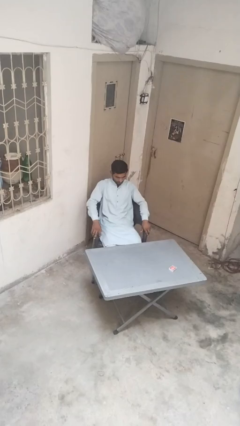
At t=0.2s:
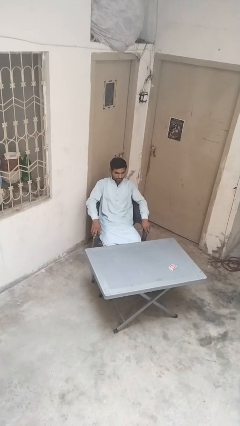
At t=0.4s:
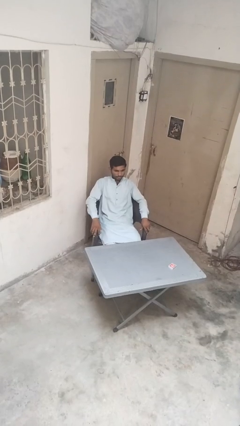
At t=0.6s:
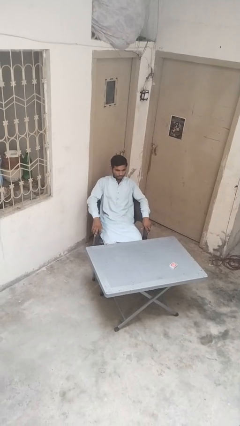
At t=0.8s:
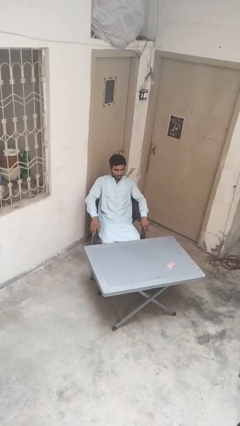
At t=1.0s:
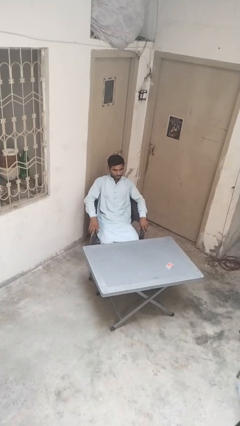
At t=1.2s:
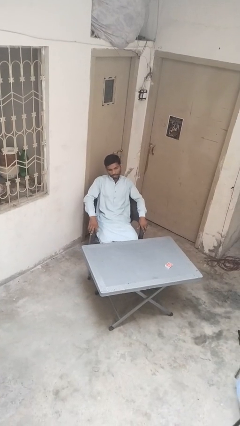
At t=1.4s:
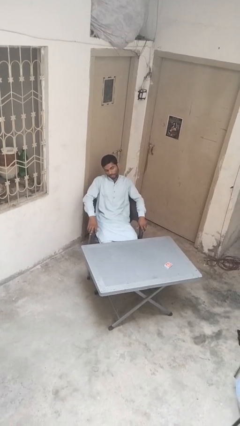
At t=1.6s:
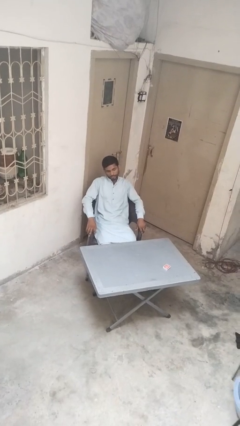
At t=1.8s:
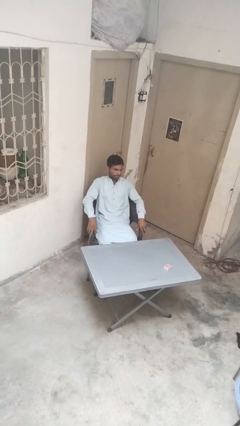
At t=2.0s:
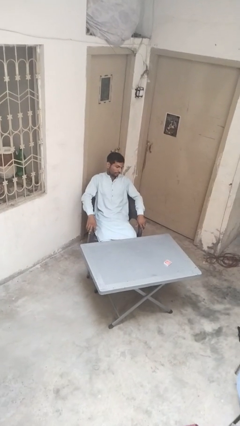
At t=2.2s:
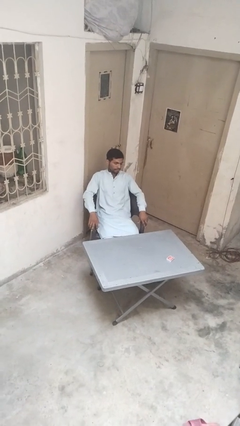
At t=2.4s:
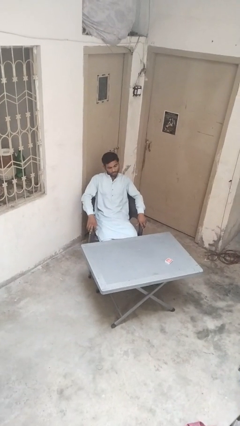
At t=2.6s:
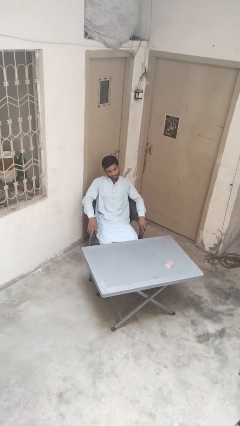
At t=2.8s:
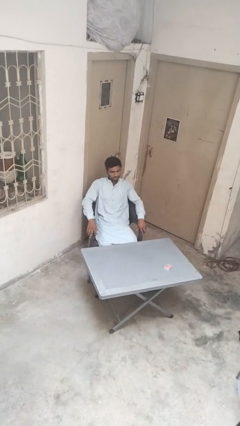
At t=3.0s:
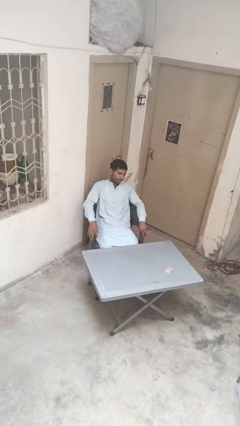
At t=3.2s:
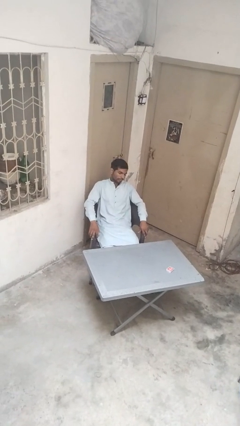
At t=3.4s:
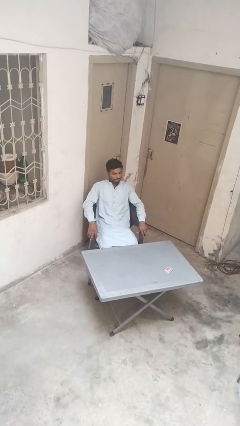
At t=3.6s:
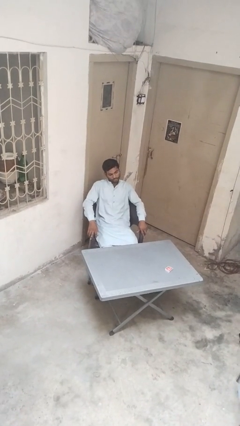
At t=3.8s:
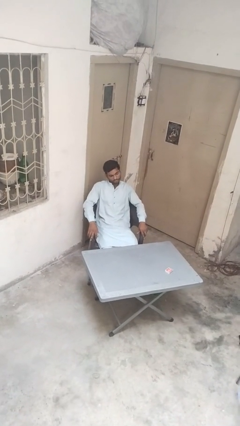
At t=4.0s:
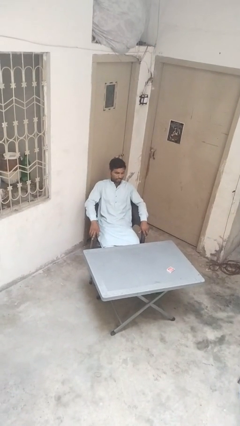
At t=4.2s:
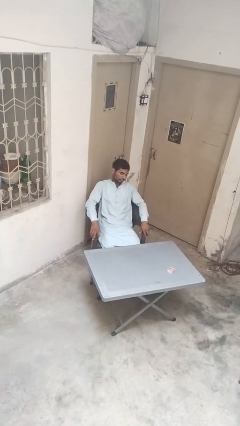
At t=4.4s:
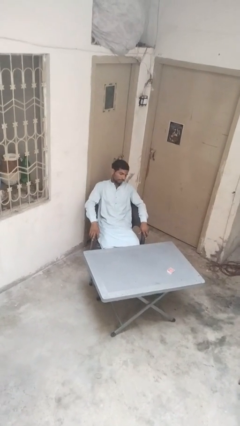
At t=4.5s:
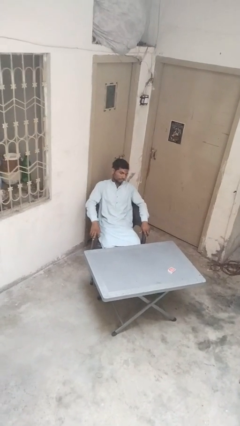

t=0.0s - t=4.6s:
person shakes head

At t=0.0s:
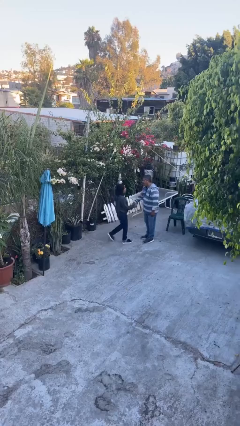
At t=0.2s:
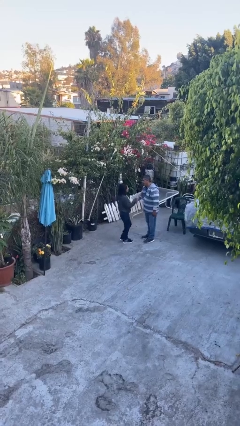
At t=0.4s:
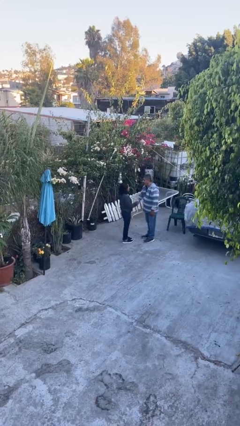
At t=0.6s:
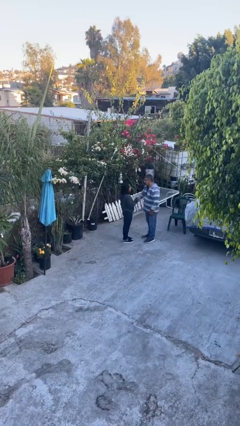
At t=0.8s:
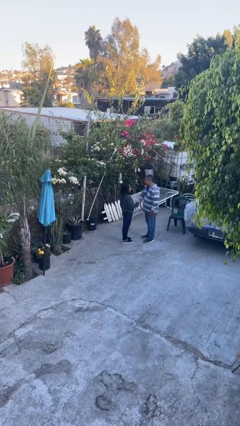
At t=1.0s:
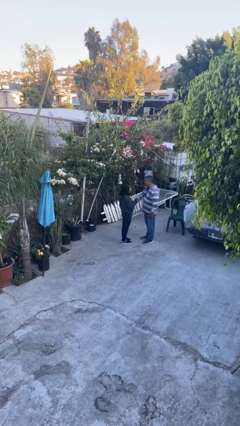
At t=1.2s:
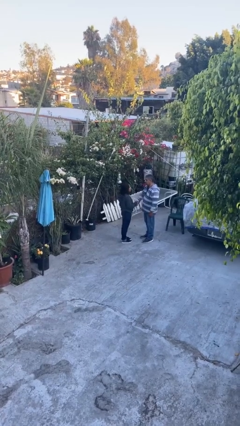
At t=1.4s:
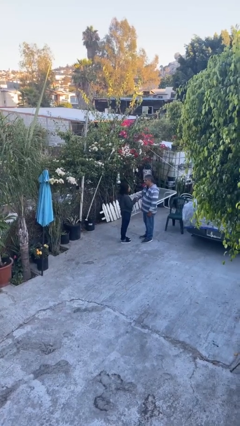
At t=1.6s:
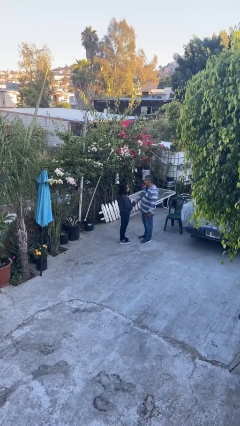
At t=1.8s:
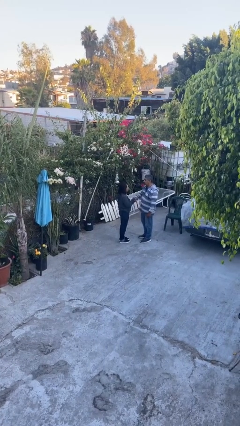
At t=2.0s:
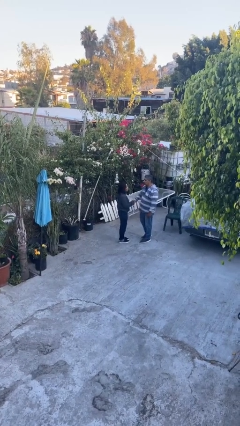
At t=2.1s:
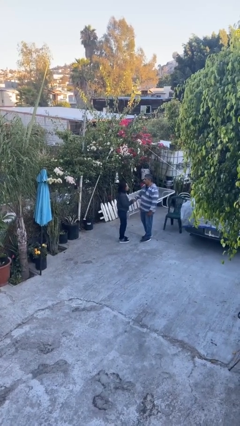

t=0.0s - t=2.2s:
person shakes hand

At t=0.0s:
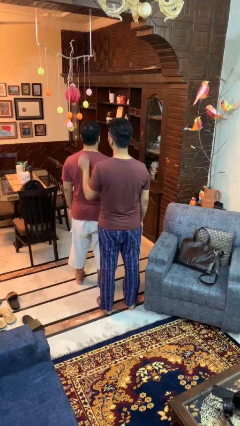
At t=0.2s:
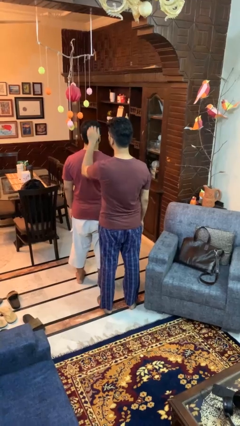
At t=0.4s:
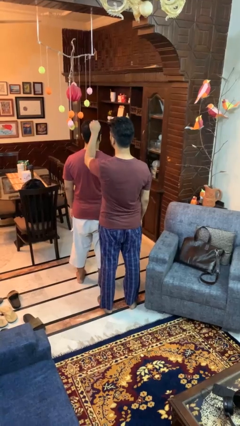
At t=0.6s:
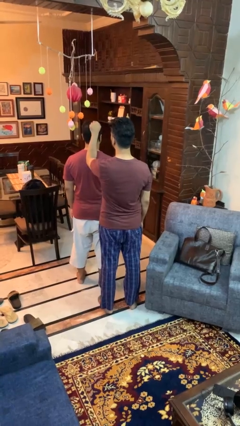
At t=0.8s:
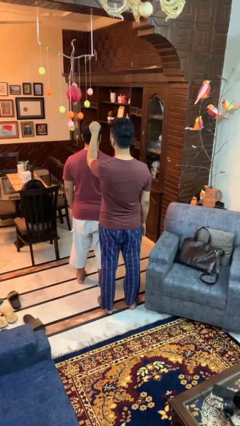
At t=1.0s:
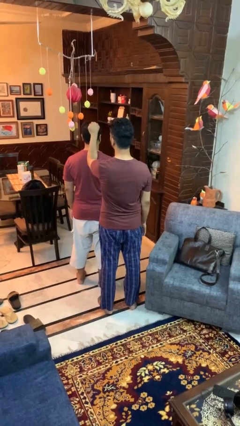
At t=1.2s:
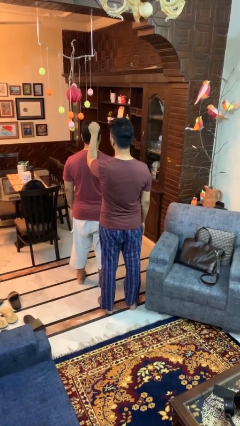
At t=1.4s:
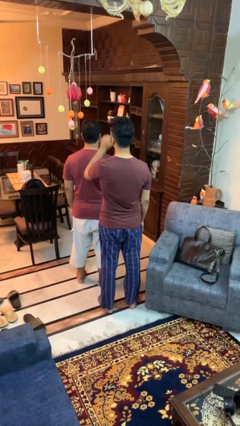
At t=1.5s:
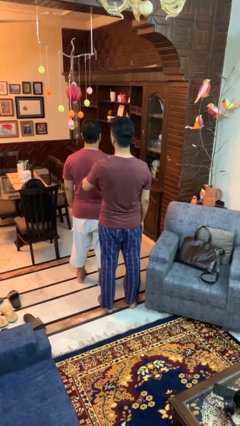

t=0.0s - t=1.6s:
person grabs person by hair

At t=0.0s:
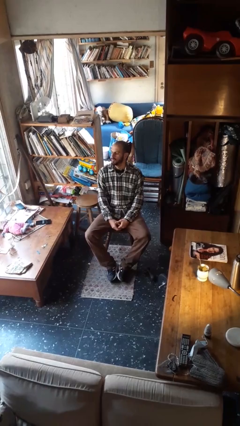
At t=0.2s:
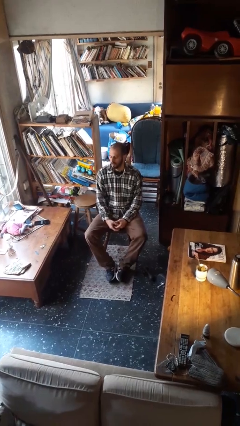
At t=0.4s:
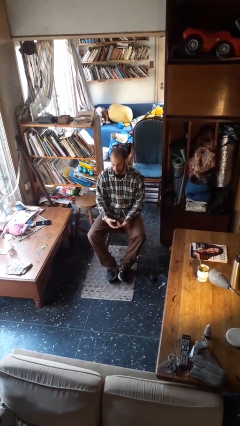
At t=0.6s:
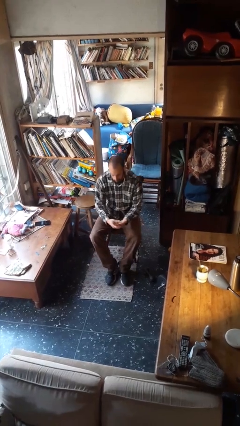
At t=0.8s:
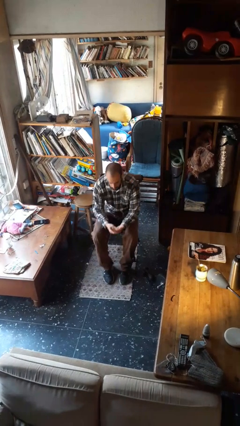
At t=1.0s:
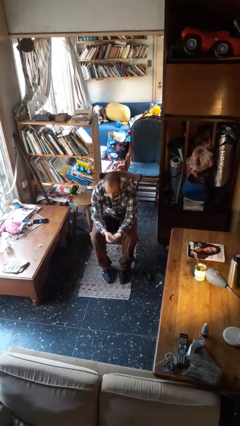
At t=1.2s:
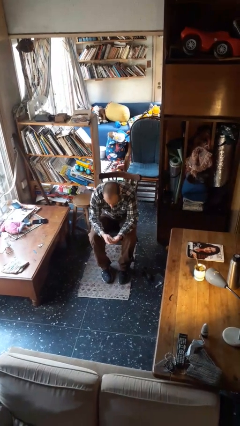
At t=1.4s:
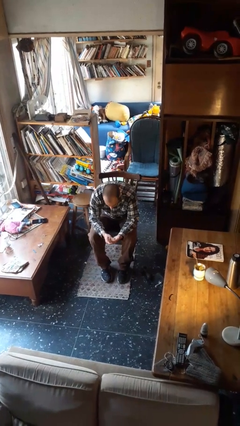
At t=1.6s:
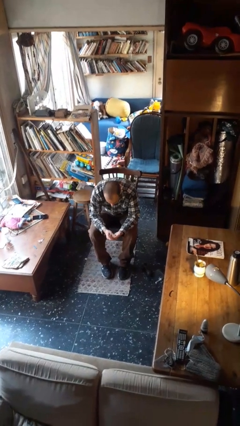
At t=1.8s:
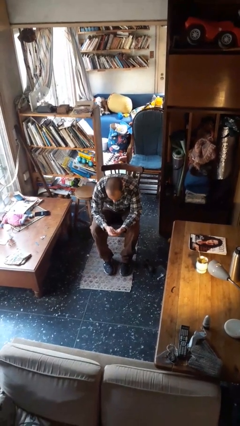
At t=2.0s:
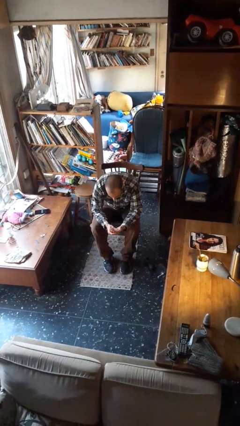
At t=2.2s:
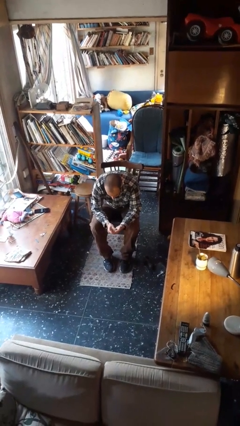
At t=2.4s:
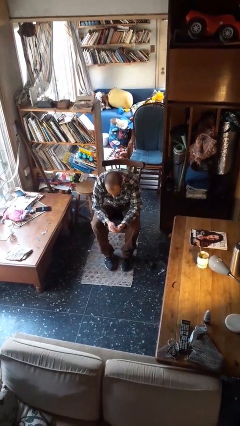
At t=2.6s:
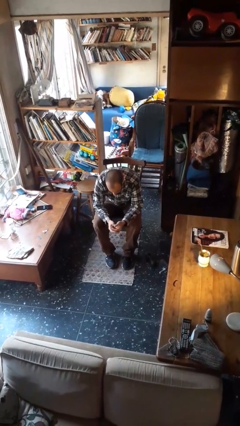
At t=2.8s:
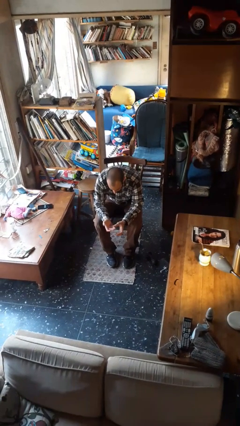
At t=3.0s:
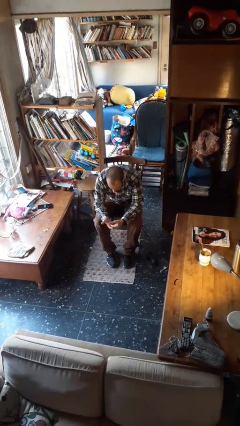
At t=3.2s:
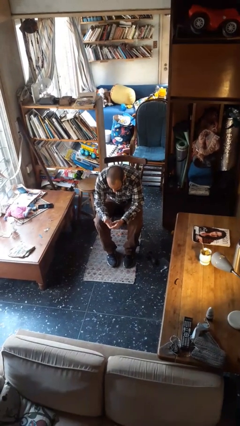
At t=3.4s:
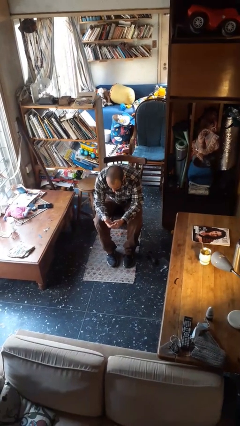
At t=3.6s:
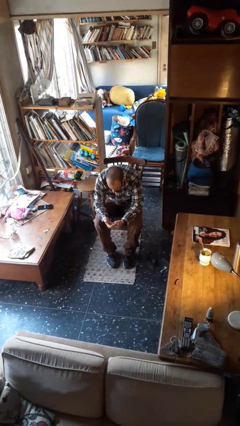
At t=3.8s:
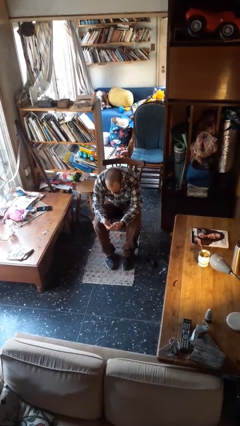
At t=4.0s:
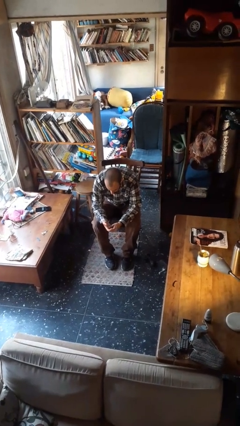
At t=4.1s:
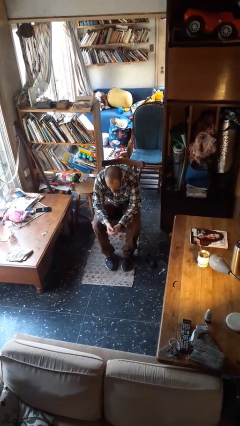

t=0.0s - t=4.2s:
person looks at hands in lap

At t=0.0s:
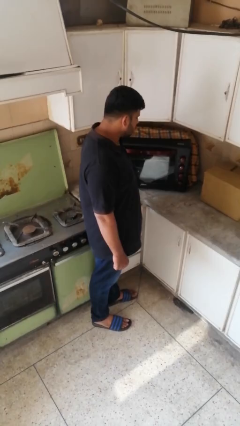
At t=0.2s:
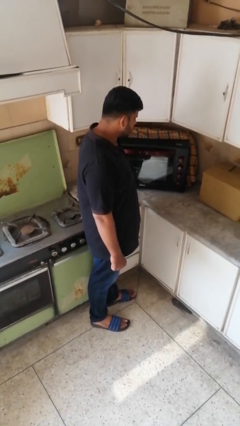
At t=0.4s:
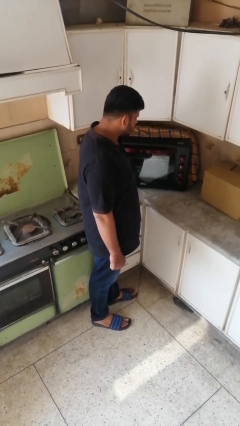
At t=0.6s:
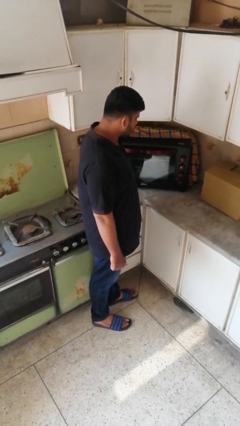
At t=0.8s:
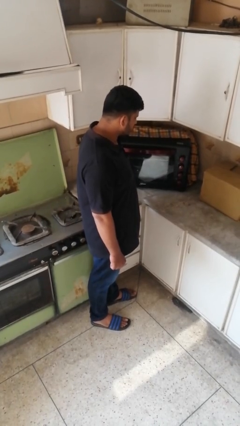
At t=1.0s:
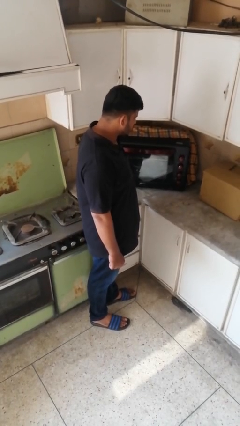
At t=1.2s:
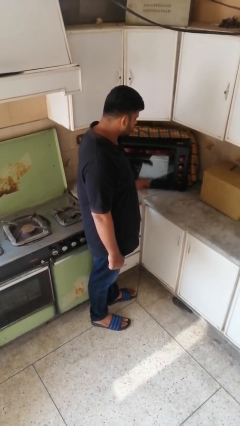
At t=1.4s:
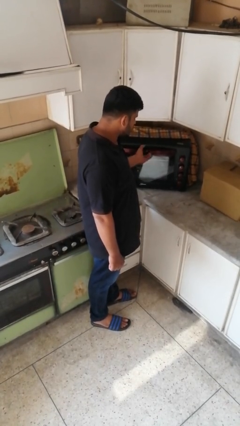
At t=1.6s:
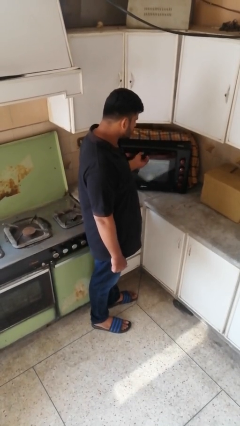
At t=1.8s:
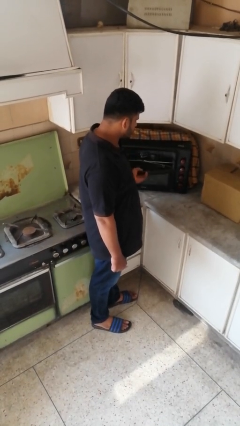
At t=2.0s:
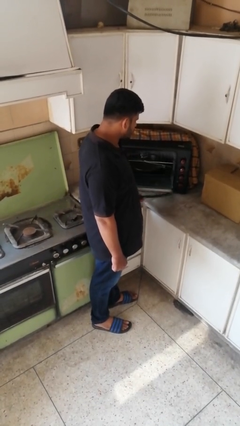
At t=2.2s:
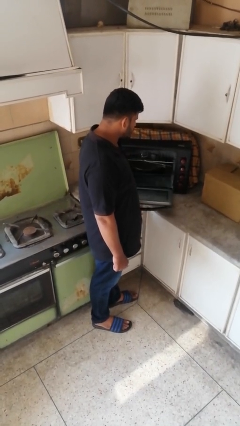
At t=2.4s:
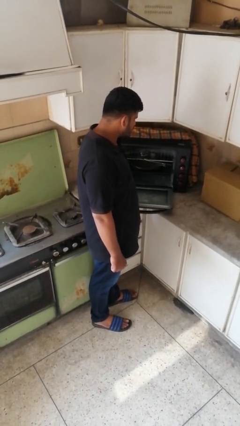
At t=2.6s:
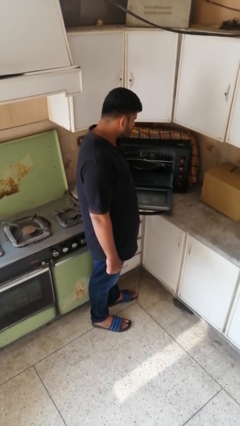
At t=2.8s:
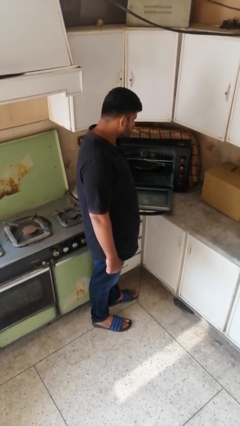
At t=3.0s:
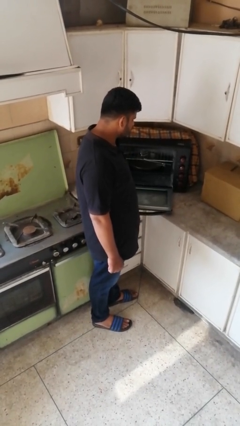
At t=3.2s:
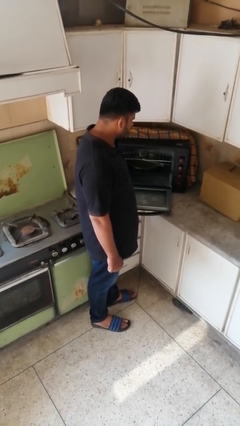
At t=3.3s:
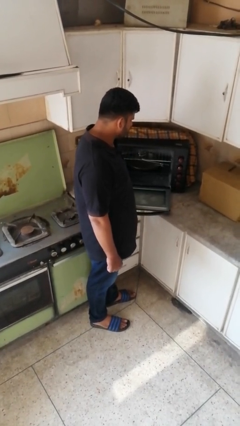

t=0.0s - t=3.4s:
person opens oven door

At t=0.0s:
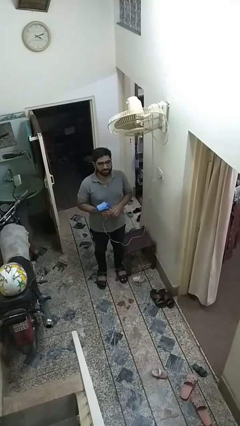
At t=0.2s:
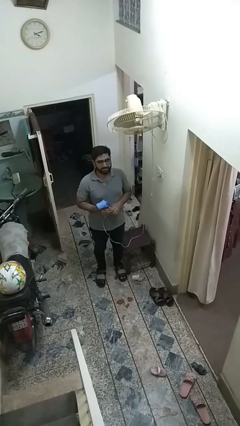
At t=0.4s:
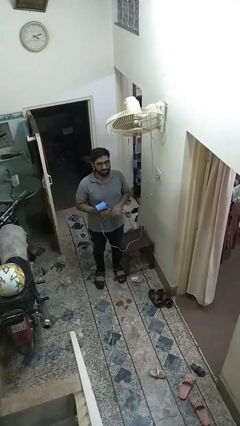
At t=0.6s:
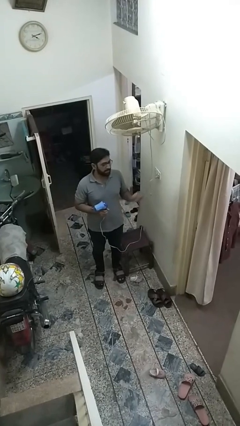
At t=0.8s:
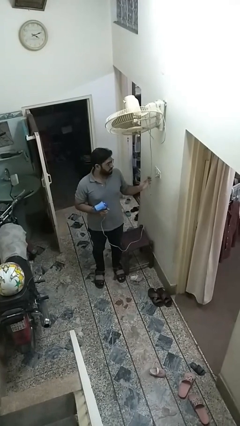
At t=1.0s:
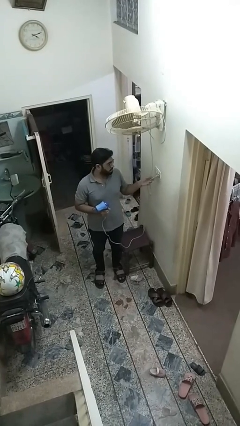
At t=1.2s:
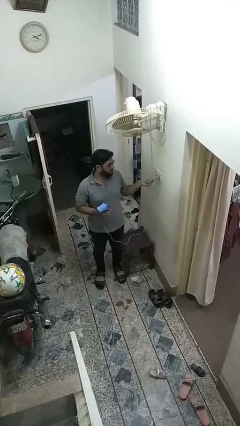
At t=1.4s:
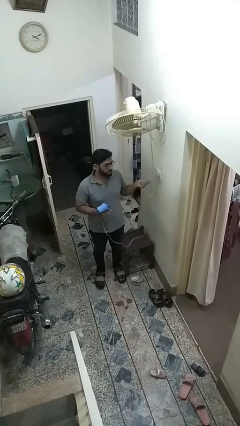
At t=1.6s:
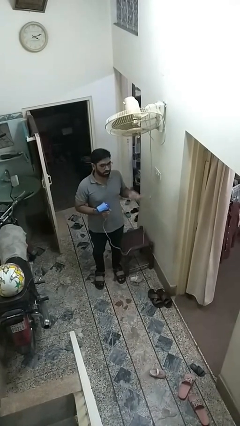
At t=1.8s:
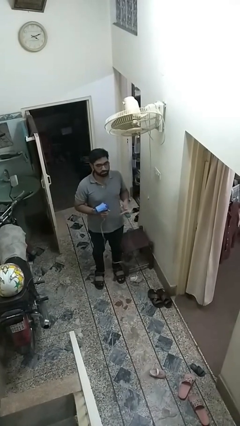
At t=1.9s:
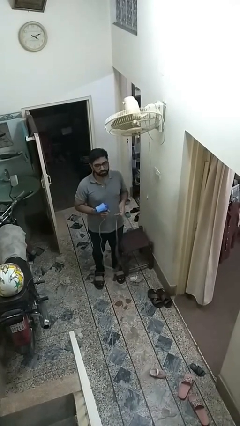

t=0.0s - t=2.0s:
person unplugs from electrical socket
